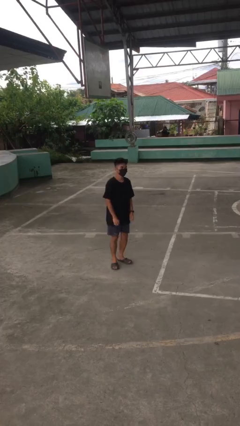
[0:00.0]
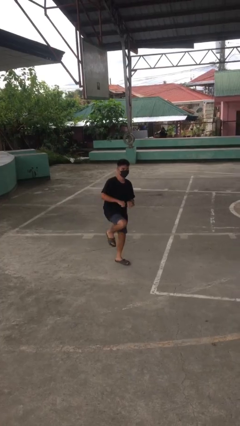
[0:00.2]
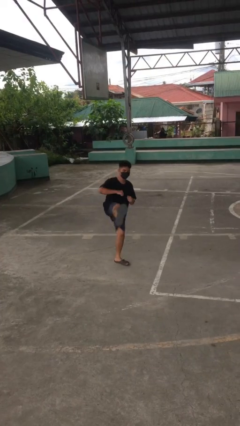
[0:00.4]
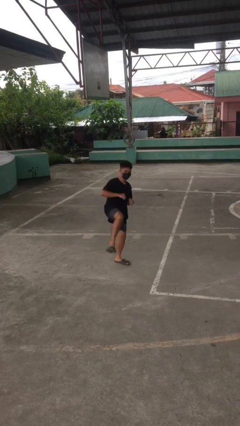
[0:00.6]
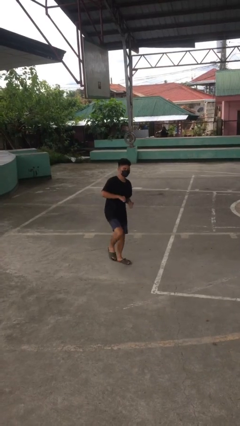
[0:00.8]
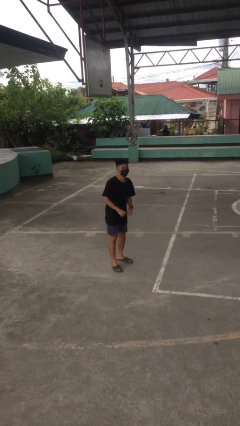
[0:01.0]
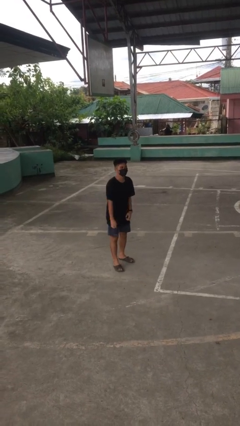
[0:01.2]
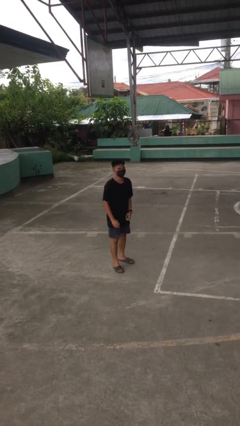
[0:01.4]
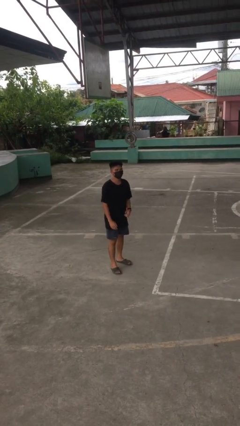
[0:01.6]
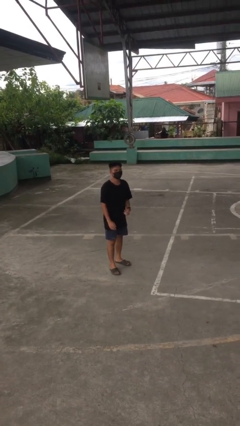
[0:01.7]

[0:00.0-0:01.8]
person karate kicks

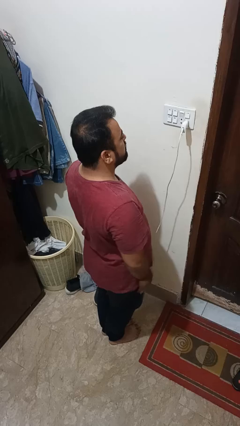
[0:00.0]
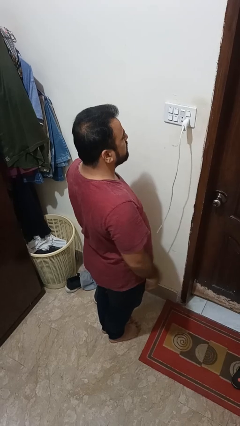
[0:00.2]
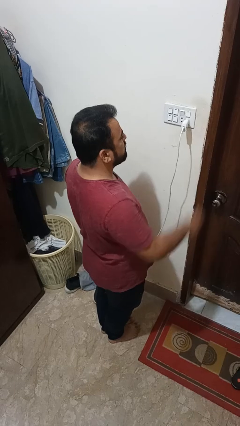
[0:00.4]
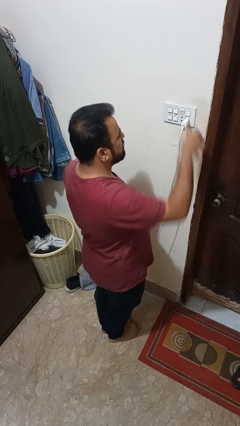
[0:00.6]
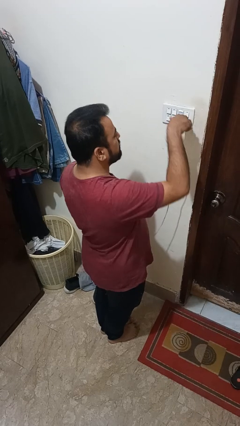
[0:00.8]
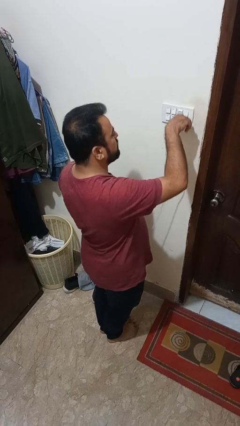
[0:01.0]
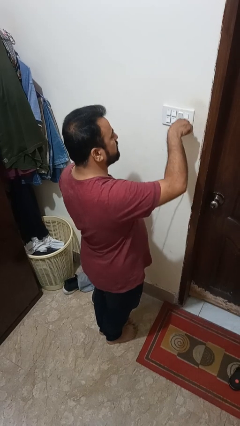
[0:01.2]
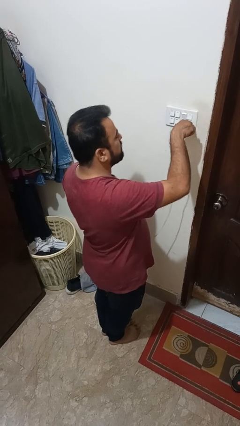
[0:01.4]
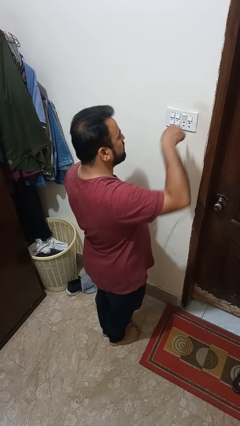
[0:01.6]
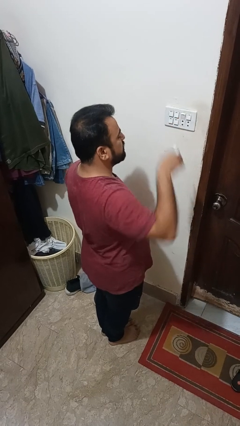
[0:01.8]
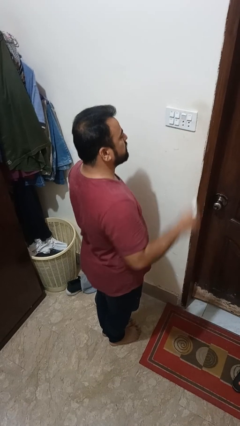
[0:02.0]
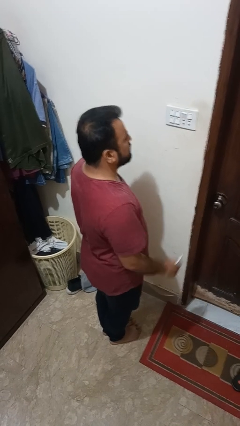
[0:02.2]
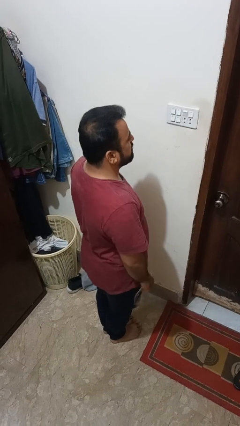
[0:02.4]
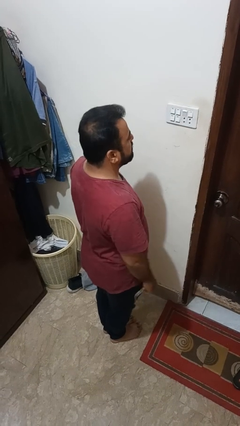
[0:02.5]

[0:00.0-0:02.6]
person unplugs from electrical socket

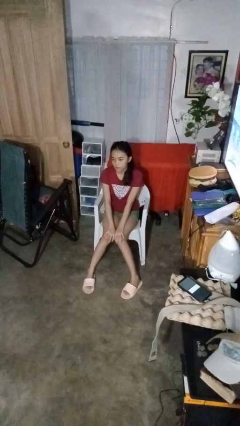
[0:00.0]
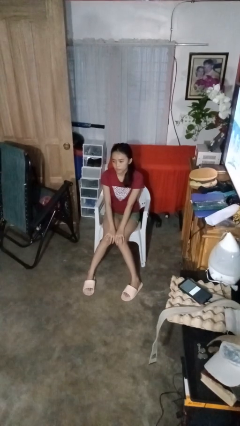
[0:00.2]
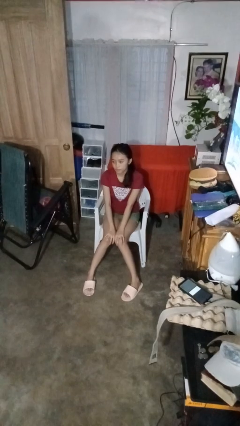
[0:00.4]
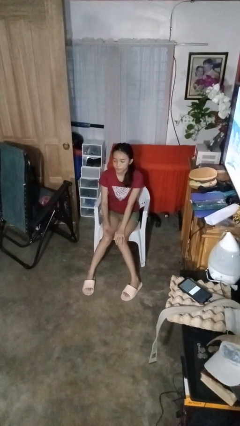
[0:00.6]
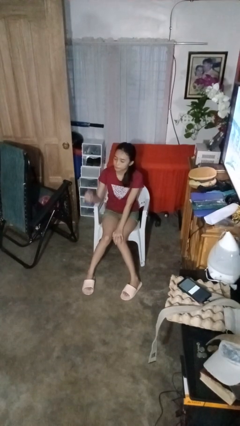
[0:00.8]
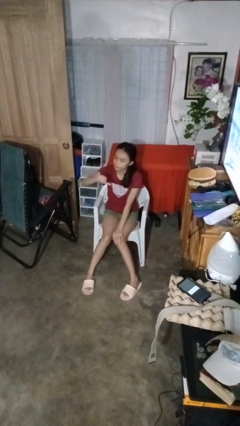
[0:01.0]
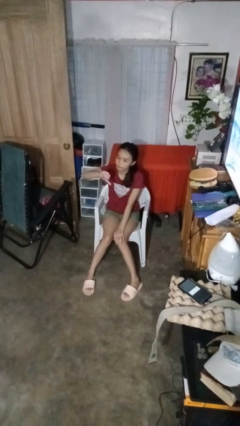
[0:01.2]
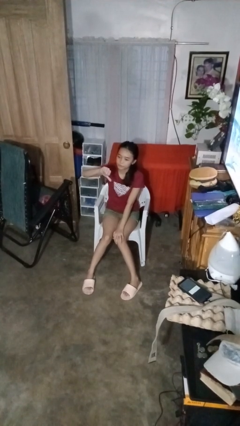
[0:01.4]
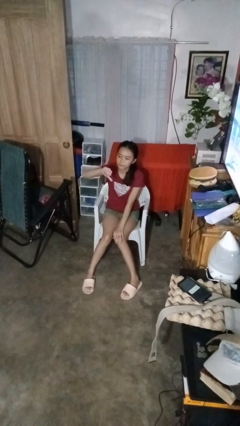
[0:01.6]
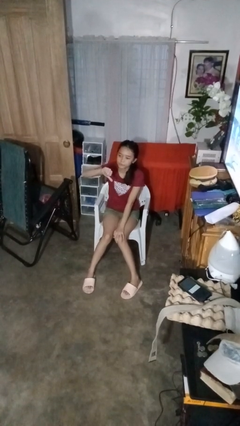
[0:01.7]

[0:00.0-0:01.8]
person gestures thumbs down

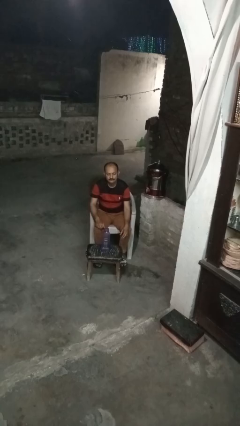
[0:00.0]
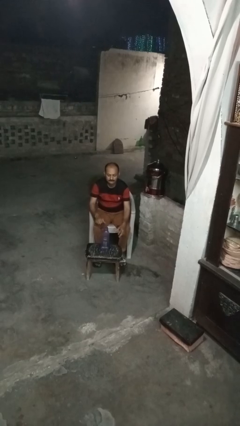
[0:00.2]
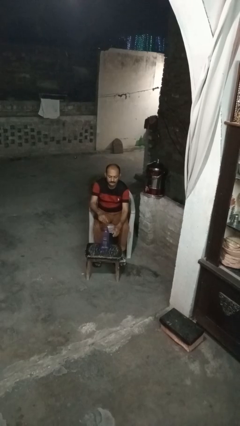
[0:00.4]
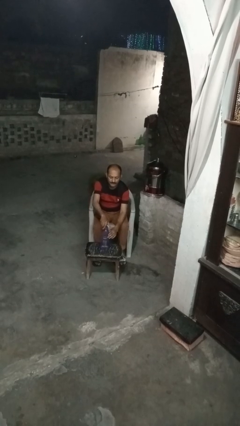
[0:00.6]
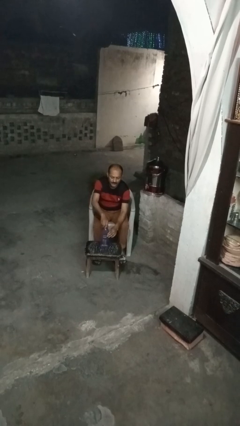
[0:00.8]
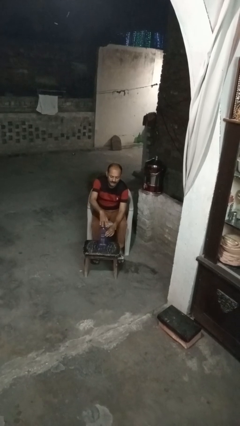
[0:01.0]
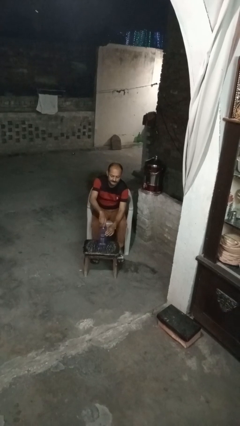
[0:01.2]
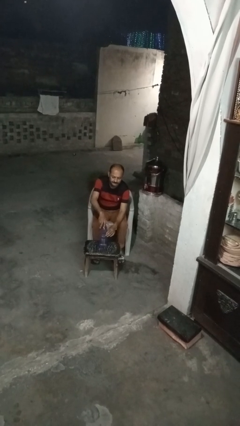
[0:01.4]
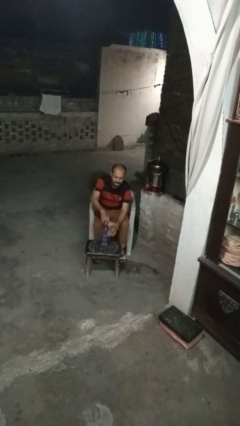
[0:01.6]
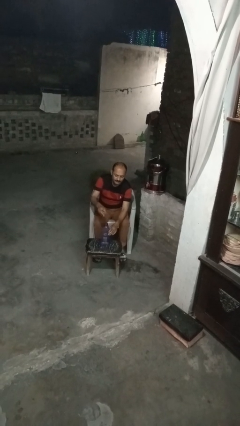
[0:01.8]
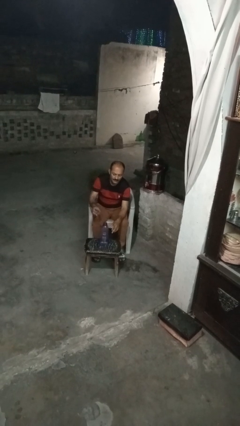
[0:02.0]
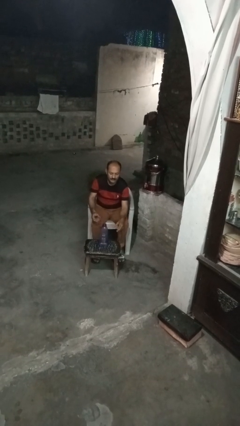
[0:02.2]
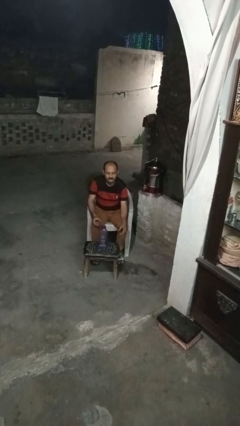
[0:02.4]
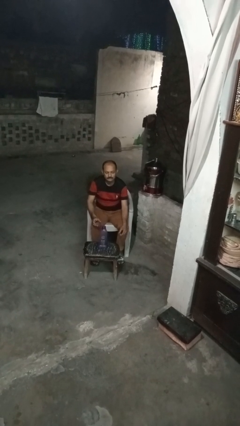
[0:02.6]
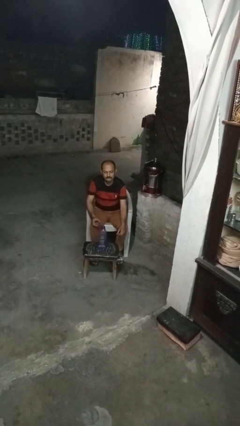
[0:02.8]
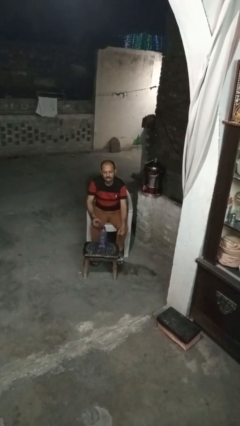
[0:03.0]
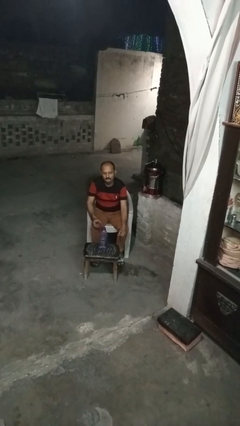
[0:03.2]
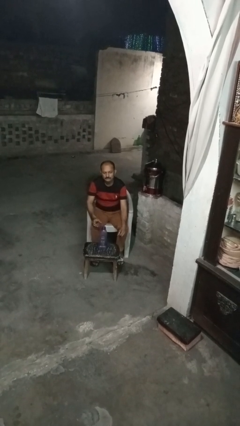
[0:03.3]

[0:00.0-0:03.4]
person unscrews lid from bottle

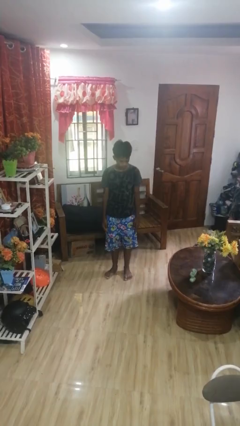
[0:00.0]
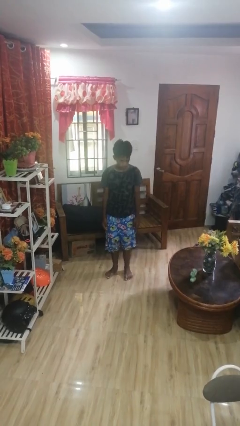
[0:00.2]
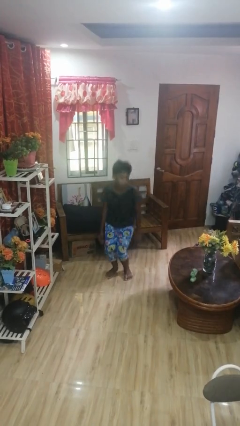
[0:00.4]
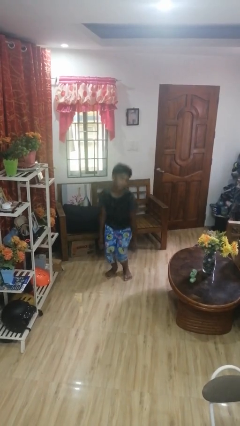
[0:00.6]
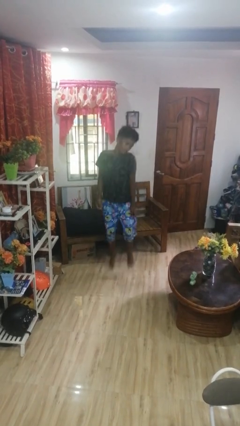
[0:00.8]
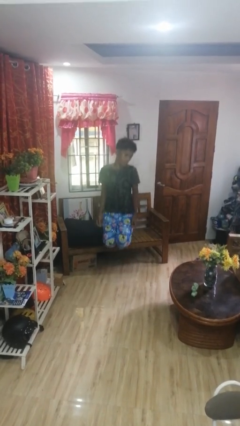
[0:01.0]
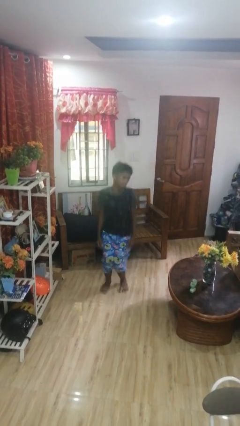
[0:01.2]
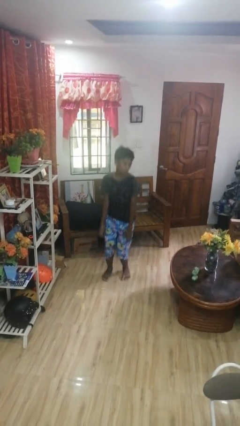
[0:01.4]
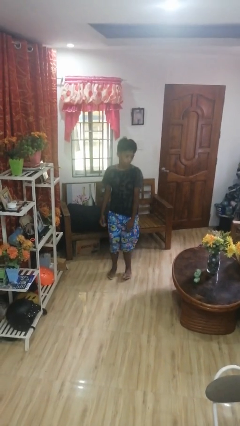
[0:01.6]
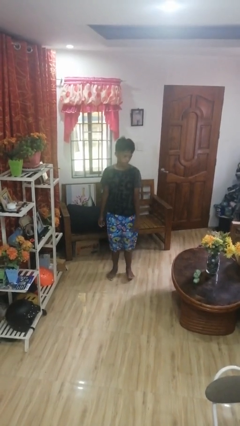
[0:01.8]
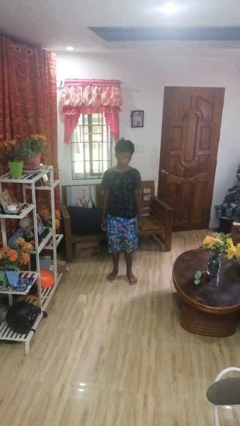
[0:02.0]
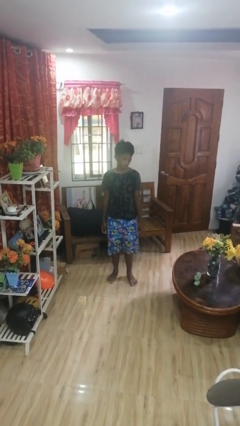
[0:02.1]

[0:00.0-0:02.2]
person jumps

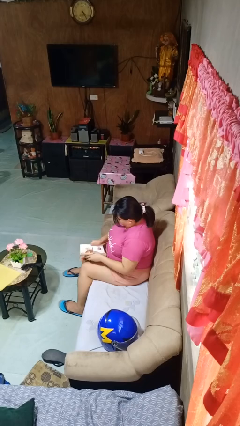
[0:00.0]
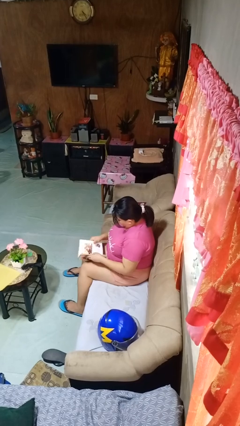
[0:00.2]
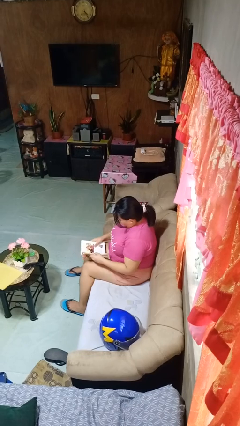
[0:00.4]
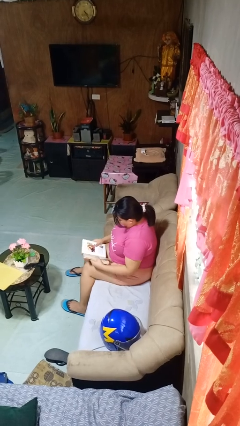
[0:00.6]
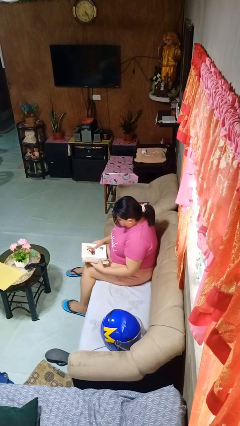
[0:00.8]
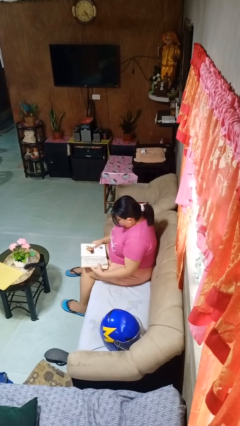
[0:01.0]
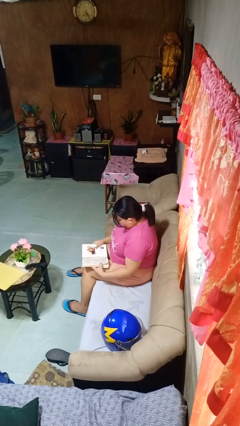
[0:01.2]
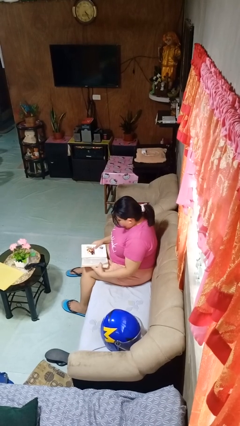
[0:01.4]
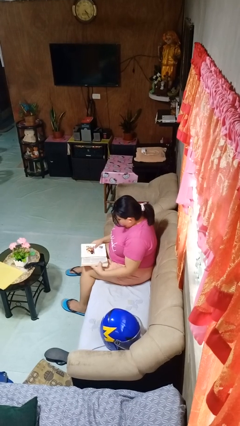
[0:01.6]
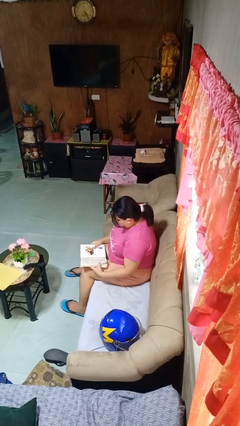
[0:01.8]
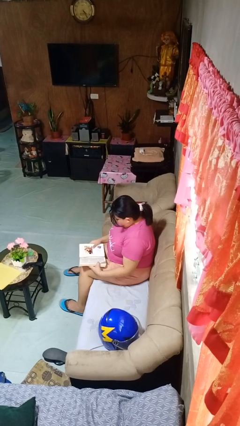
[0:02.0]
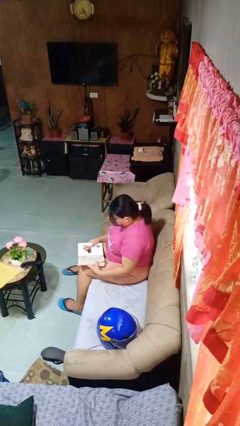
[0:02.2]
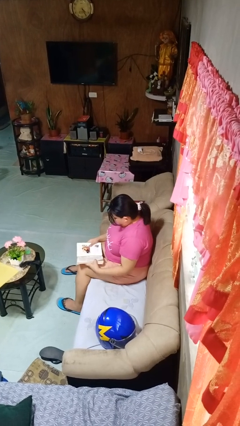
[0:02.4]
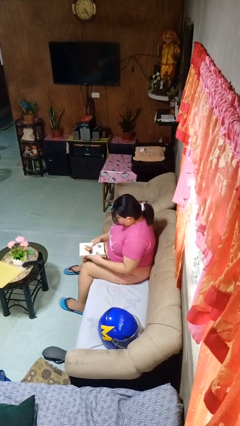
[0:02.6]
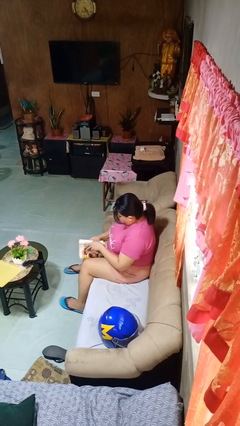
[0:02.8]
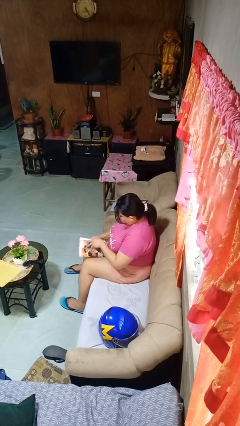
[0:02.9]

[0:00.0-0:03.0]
person reads book

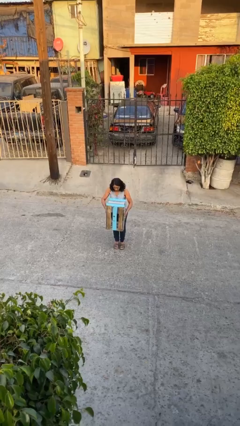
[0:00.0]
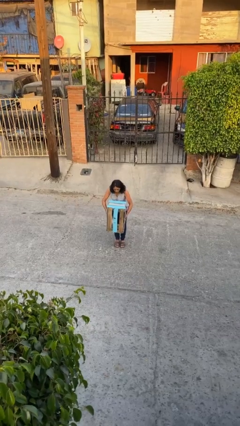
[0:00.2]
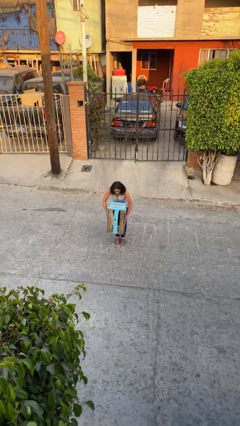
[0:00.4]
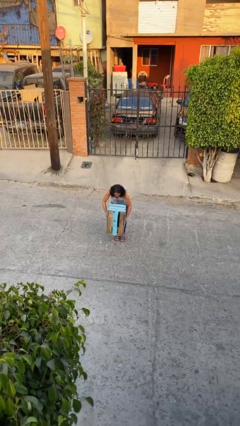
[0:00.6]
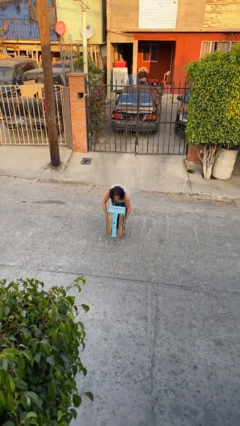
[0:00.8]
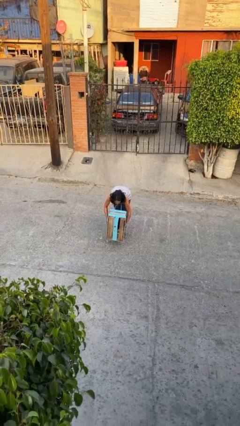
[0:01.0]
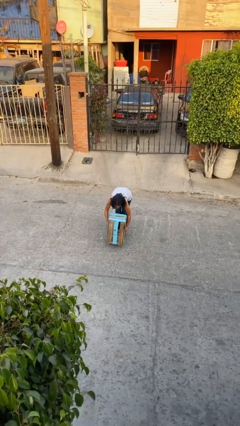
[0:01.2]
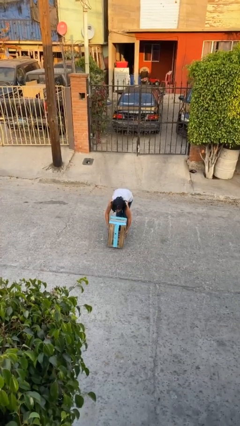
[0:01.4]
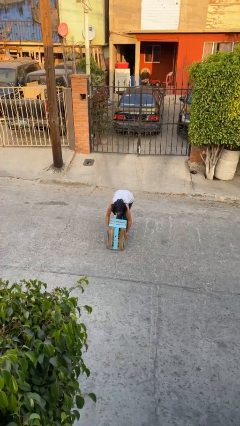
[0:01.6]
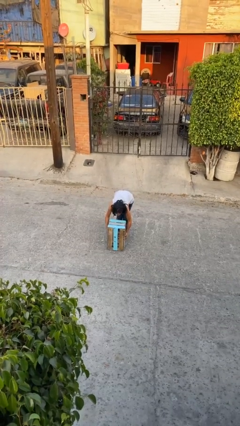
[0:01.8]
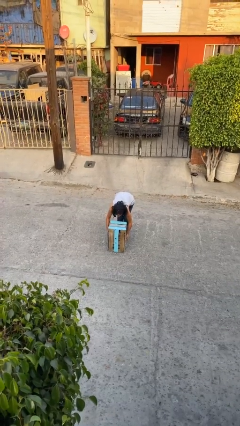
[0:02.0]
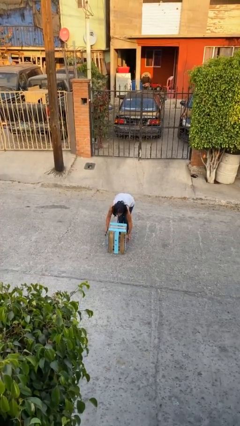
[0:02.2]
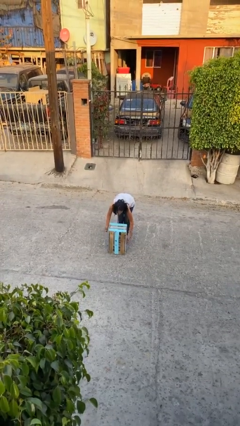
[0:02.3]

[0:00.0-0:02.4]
person puts down object on floor
